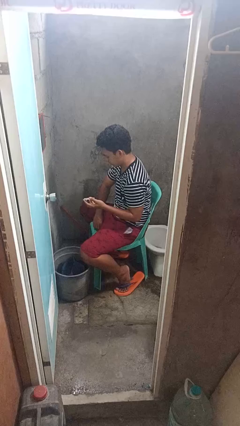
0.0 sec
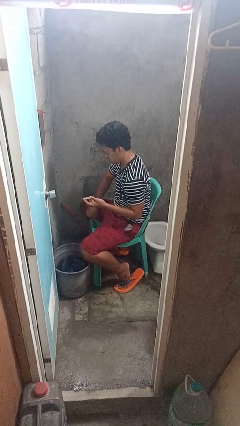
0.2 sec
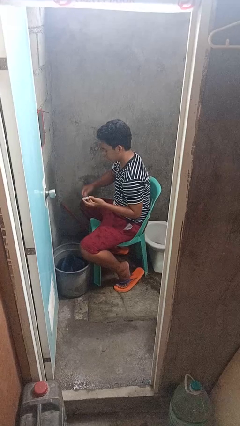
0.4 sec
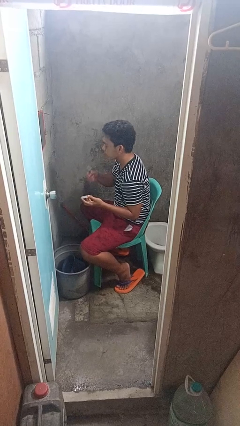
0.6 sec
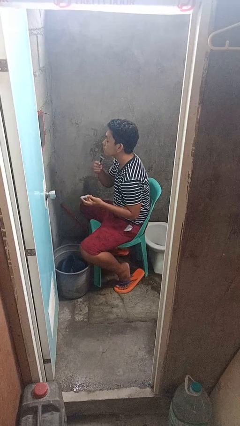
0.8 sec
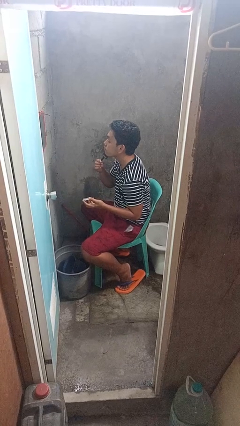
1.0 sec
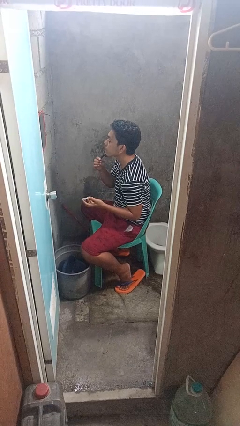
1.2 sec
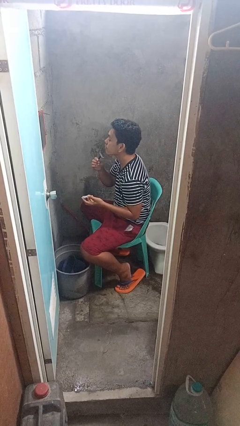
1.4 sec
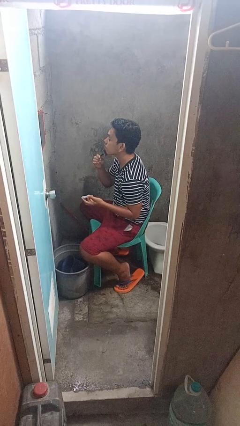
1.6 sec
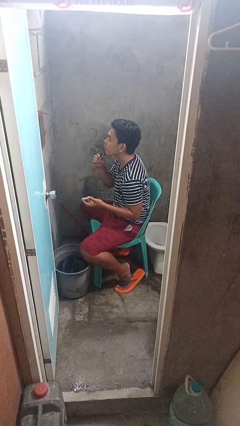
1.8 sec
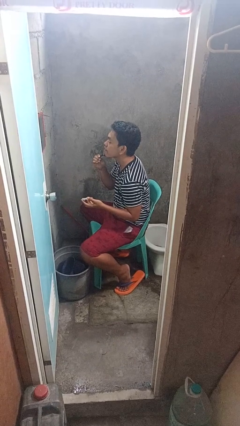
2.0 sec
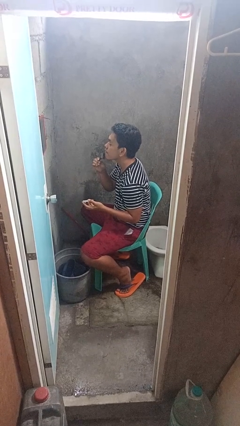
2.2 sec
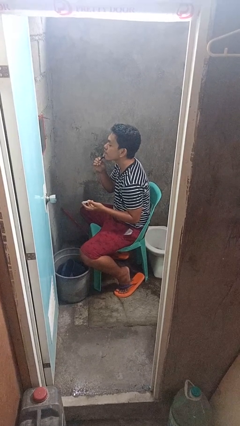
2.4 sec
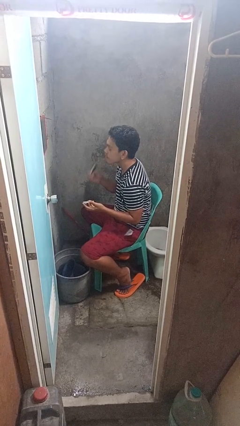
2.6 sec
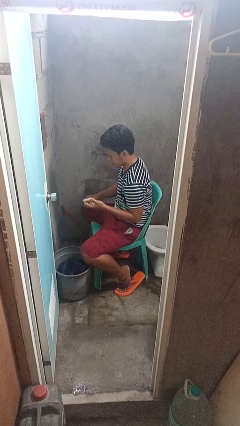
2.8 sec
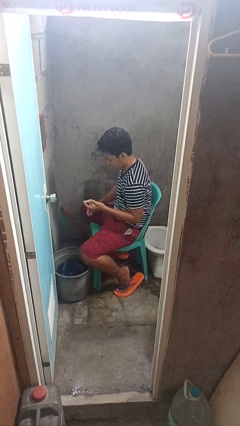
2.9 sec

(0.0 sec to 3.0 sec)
person shaves face

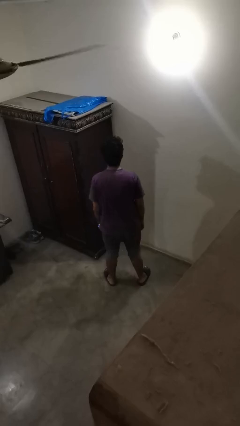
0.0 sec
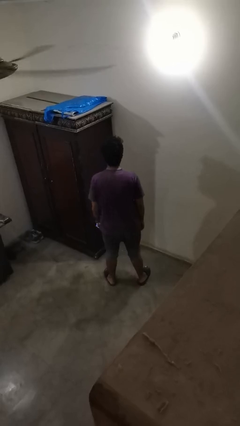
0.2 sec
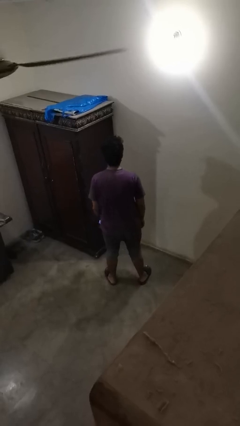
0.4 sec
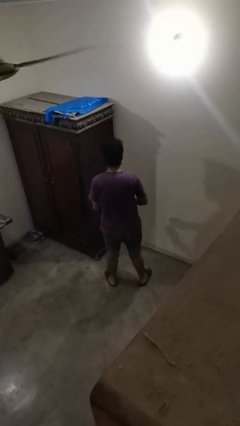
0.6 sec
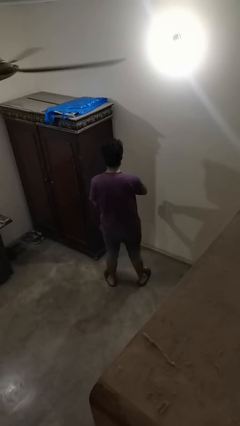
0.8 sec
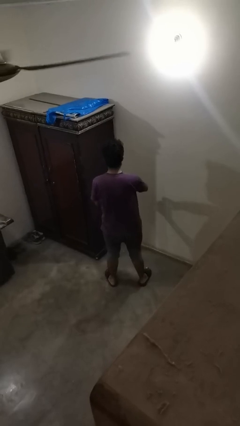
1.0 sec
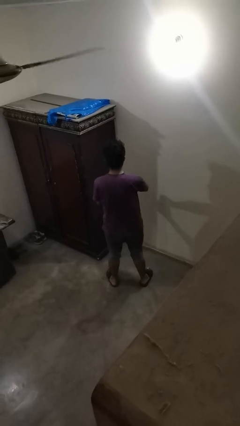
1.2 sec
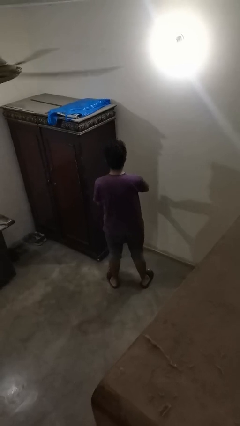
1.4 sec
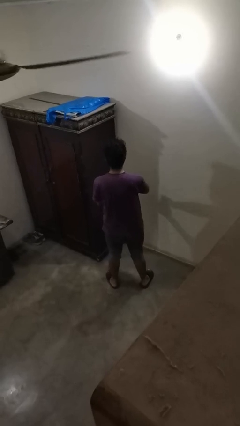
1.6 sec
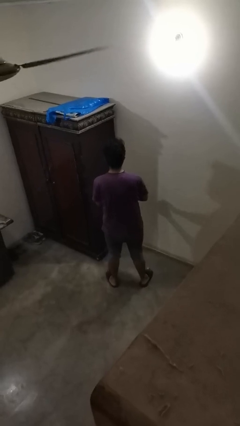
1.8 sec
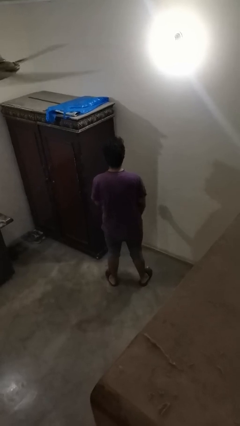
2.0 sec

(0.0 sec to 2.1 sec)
person opens beverage can

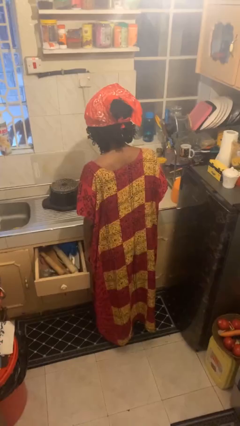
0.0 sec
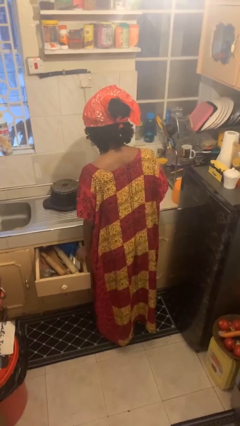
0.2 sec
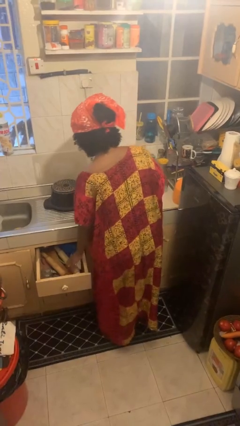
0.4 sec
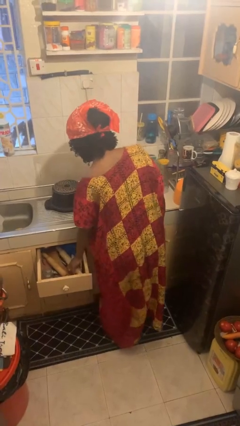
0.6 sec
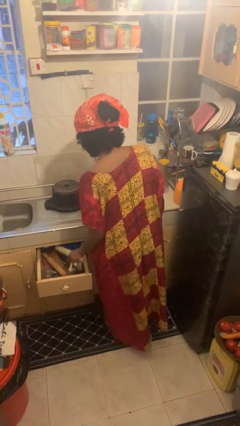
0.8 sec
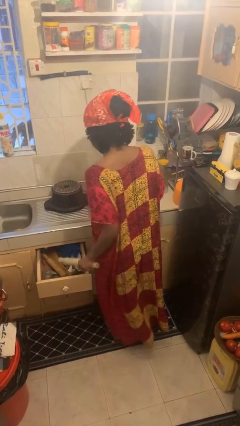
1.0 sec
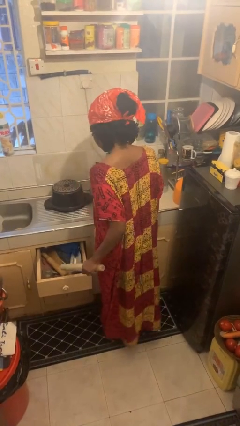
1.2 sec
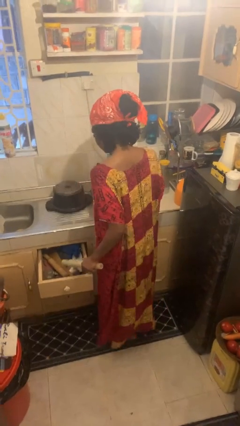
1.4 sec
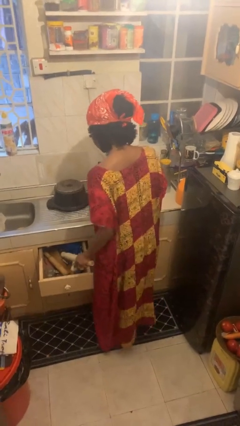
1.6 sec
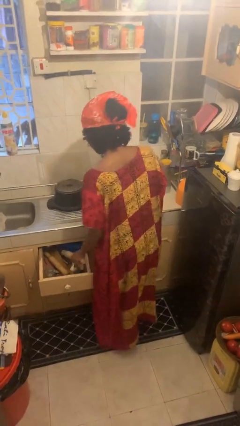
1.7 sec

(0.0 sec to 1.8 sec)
person takes object from kitchen drawer

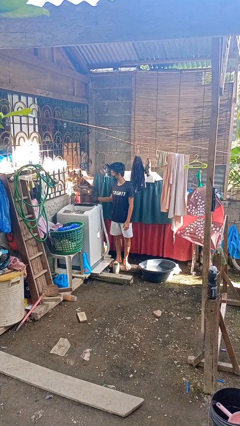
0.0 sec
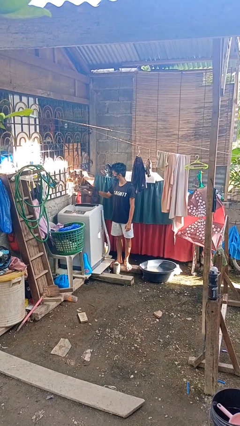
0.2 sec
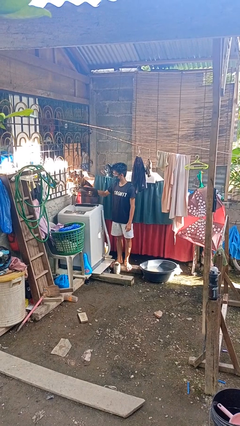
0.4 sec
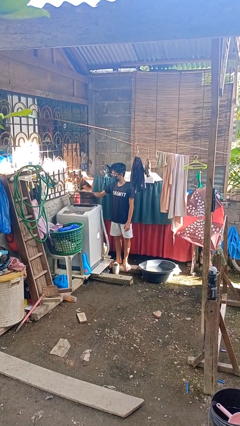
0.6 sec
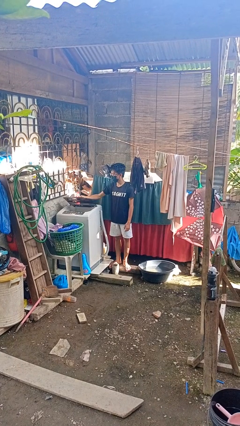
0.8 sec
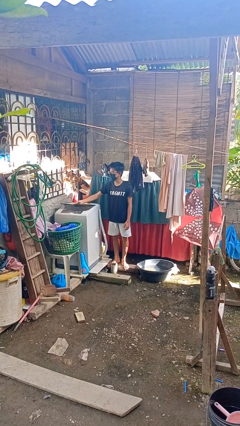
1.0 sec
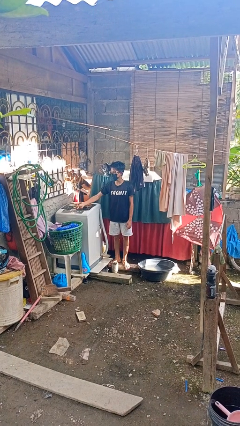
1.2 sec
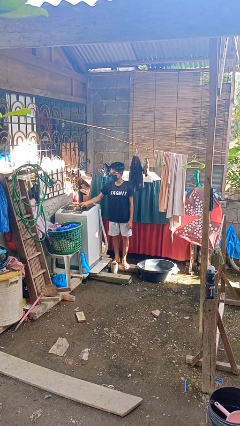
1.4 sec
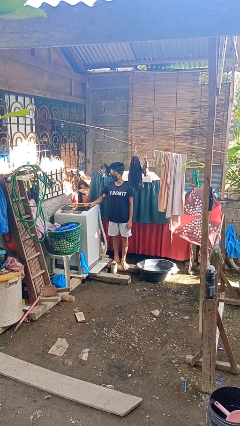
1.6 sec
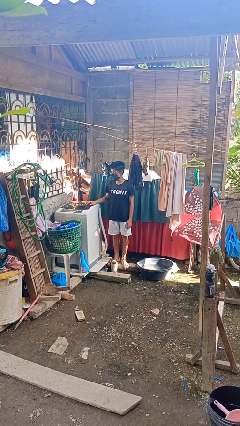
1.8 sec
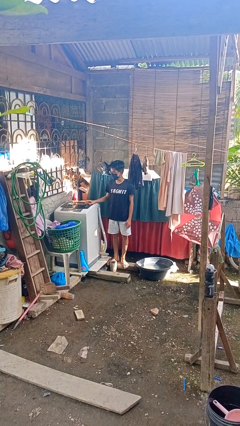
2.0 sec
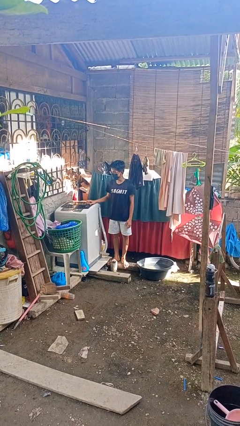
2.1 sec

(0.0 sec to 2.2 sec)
person closes clothes washer

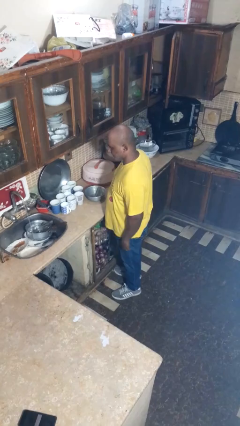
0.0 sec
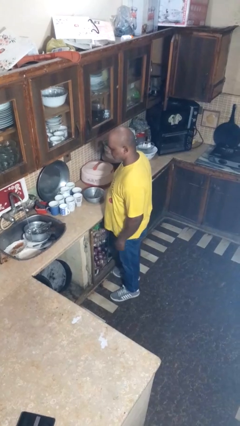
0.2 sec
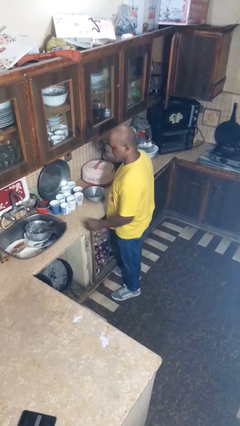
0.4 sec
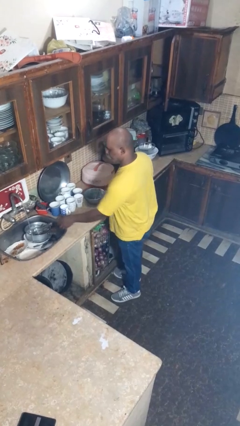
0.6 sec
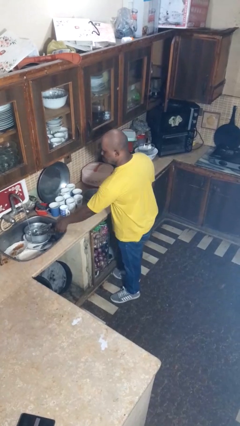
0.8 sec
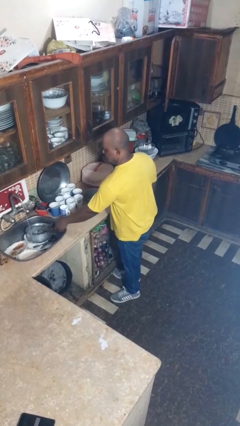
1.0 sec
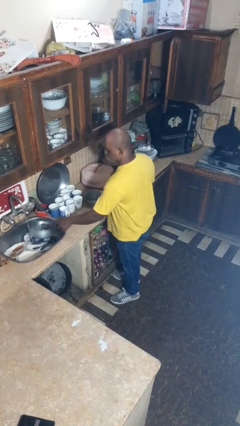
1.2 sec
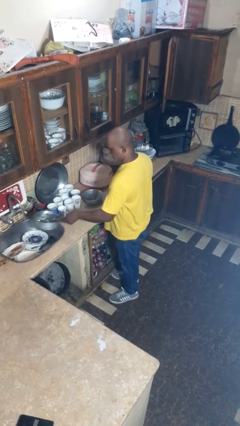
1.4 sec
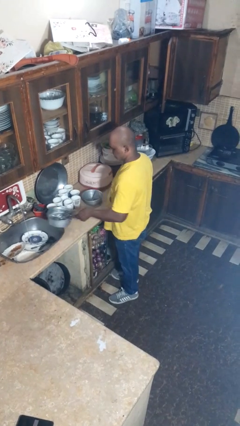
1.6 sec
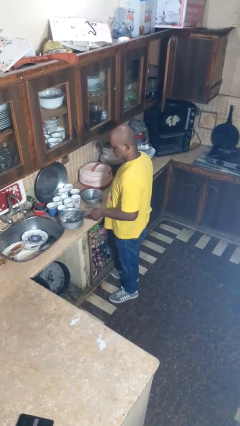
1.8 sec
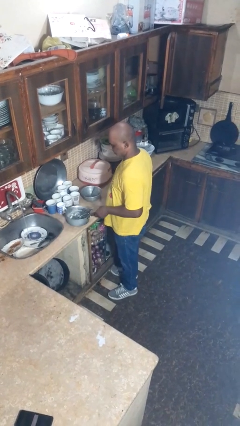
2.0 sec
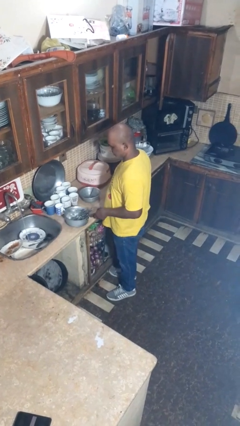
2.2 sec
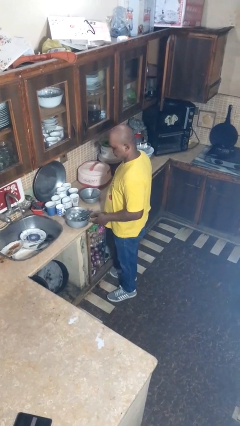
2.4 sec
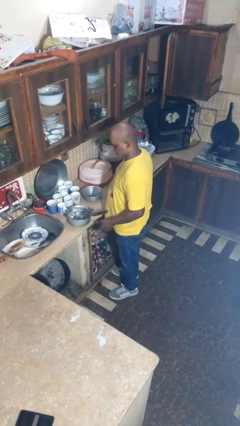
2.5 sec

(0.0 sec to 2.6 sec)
person unloads dishwasher

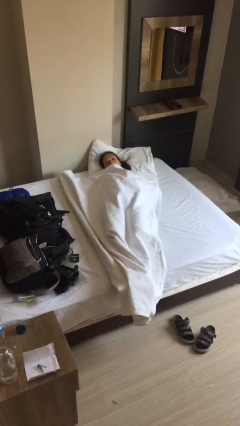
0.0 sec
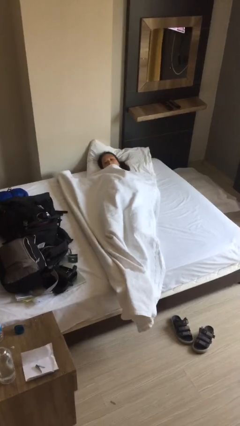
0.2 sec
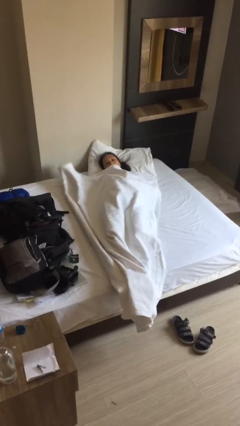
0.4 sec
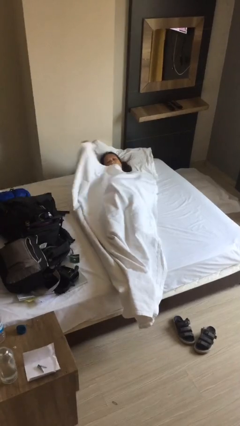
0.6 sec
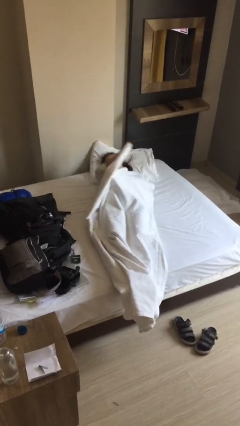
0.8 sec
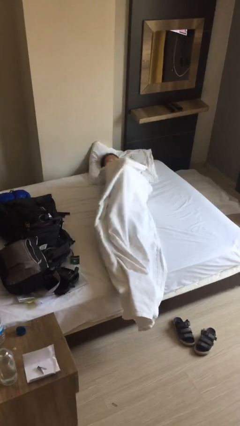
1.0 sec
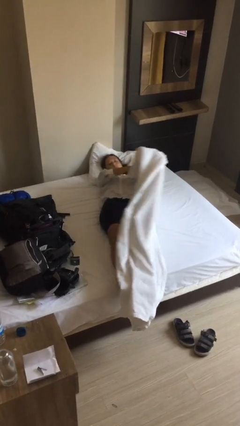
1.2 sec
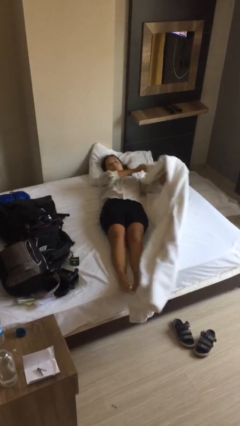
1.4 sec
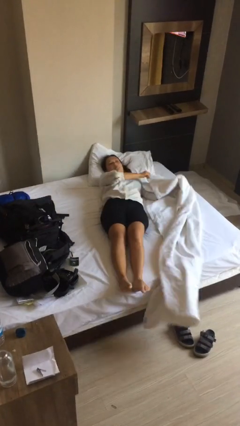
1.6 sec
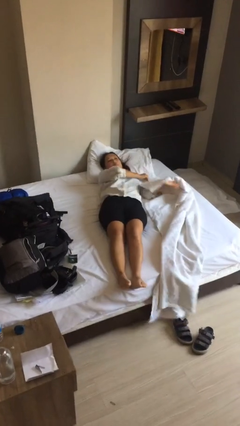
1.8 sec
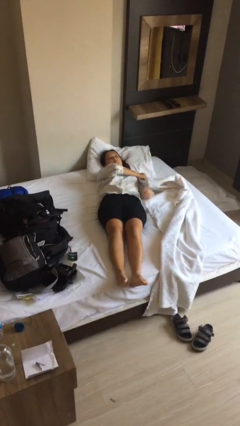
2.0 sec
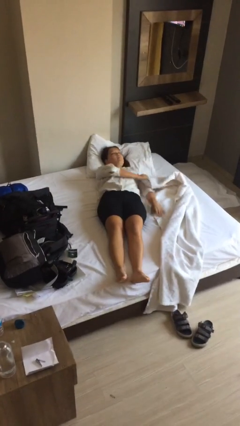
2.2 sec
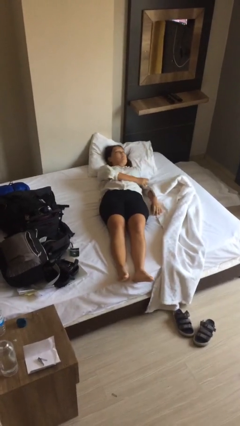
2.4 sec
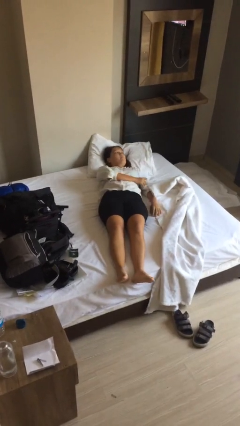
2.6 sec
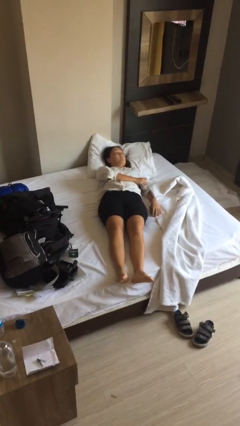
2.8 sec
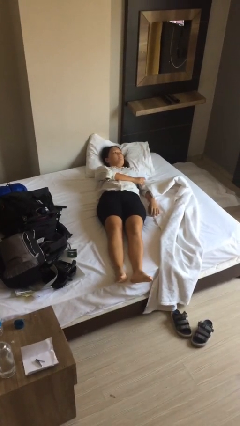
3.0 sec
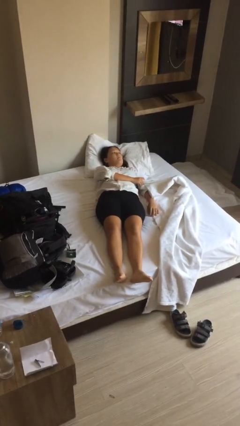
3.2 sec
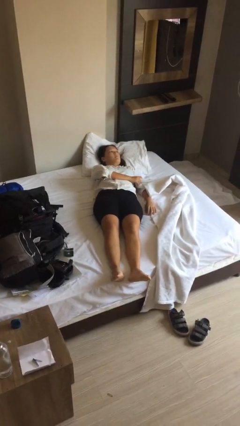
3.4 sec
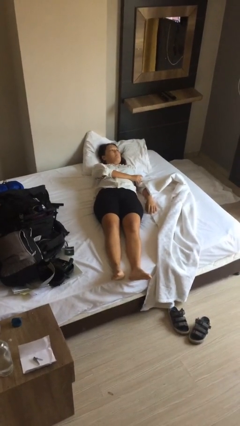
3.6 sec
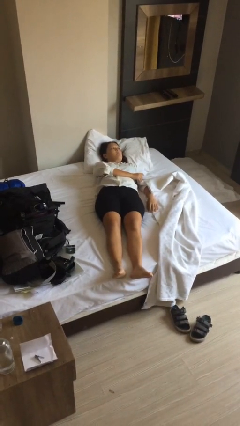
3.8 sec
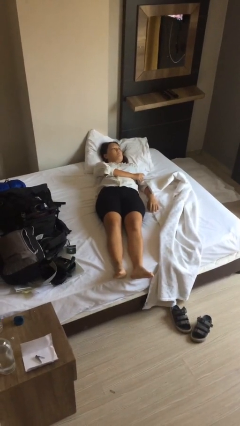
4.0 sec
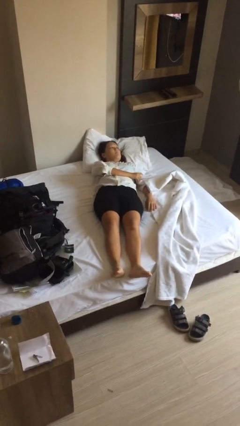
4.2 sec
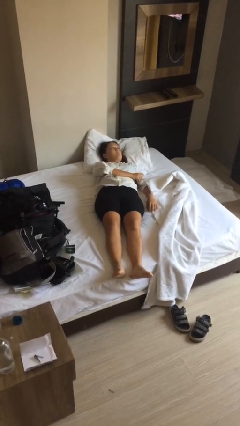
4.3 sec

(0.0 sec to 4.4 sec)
person uncovers with bedsheets

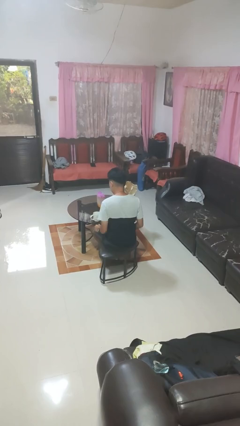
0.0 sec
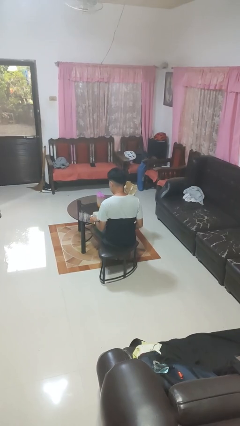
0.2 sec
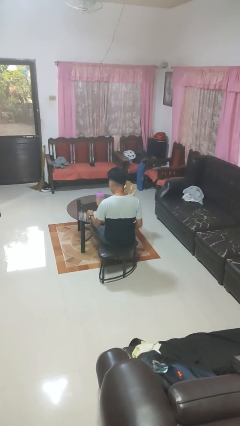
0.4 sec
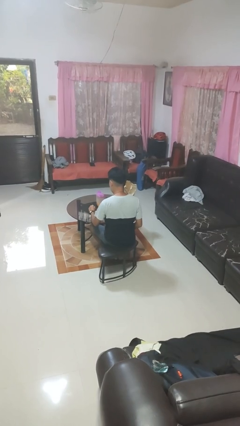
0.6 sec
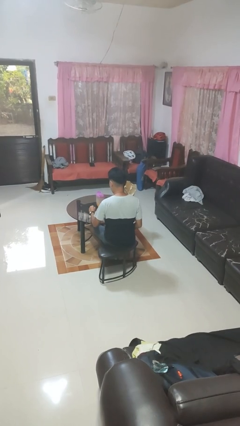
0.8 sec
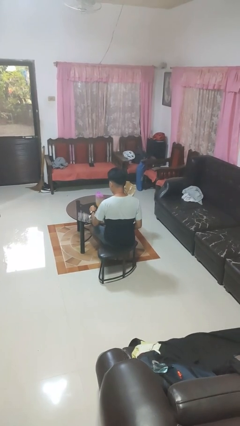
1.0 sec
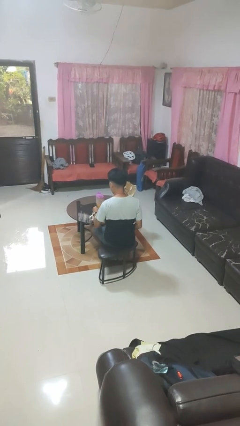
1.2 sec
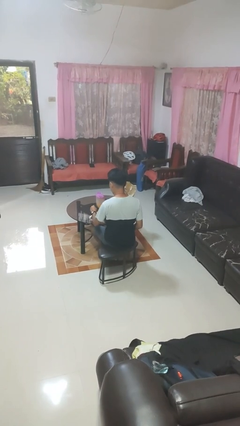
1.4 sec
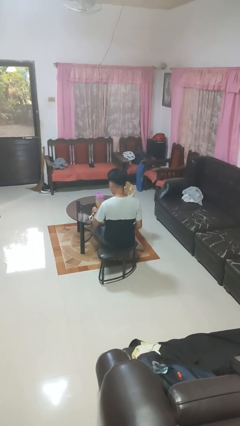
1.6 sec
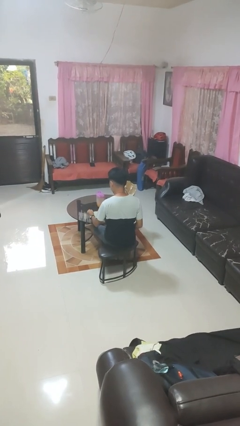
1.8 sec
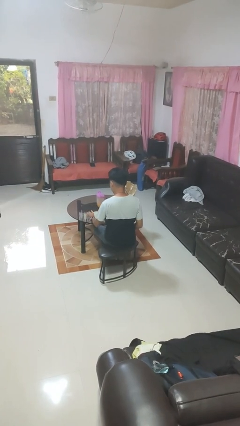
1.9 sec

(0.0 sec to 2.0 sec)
person stirs mug
